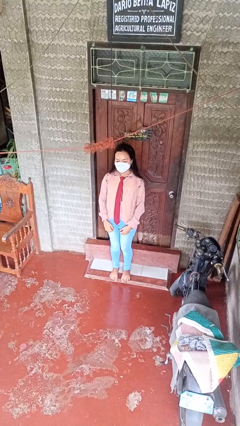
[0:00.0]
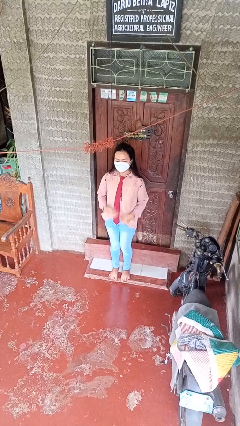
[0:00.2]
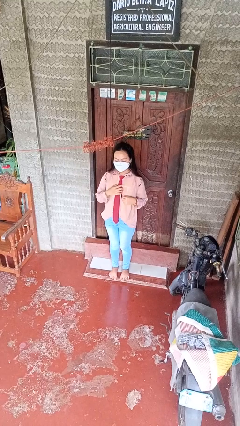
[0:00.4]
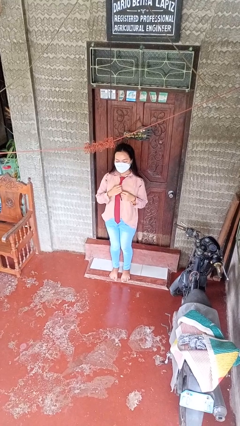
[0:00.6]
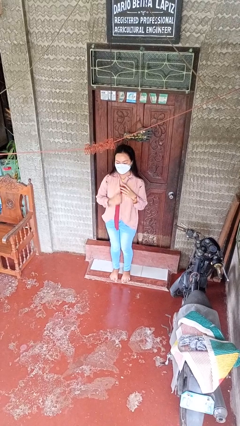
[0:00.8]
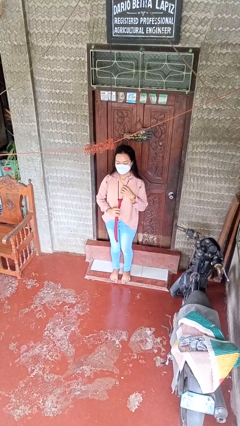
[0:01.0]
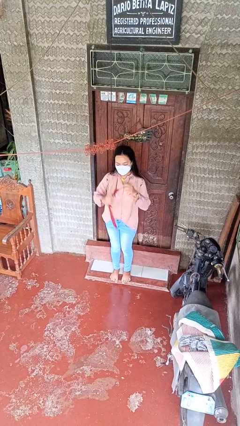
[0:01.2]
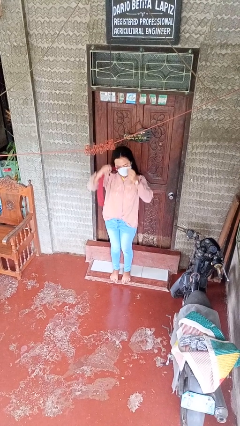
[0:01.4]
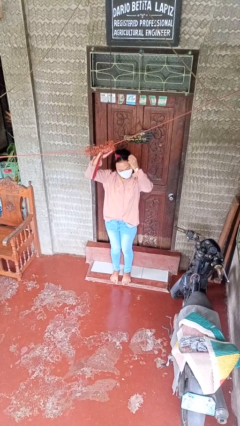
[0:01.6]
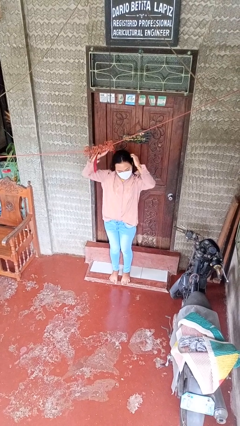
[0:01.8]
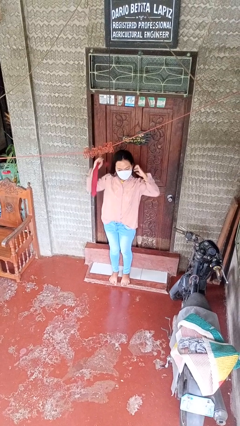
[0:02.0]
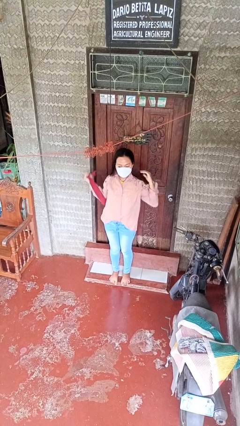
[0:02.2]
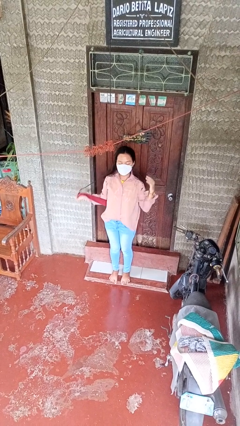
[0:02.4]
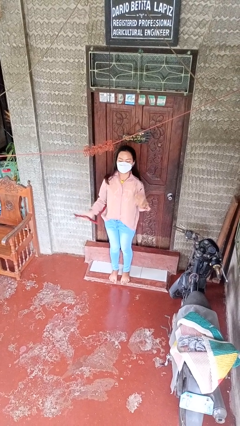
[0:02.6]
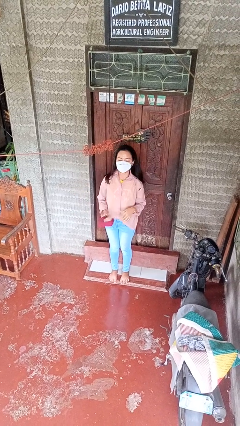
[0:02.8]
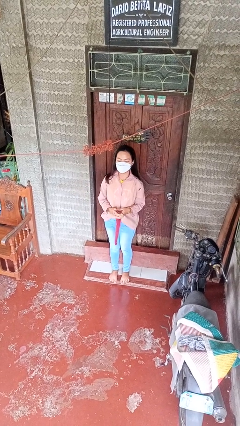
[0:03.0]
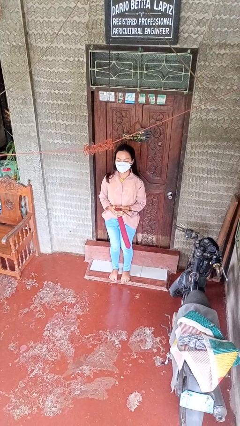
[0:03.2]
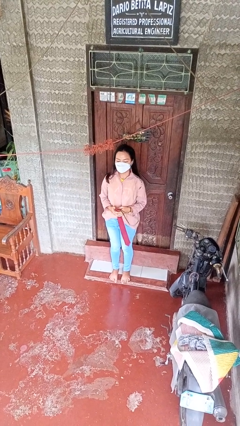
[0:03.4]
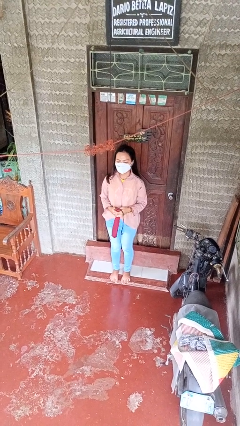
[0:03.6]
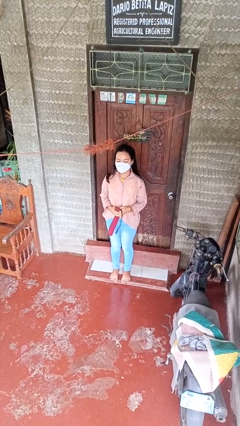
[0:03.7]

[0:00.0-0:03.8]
person takes off necktie

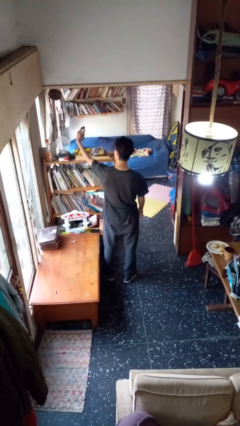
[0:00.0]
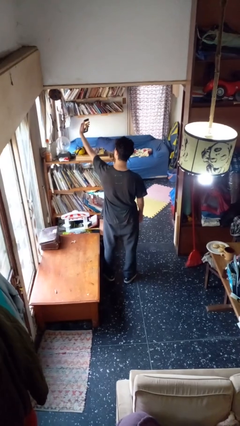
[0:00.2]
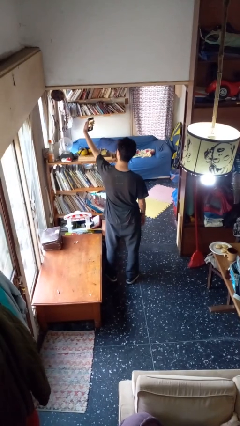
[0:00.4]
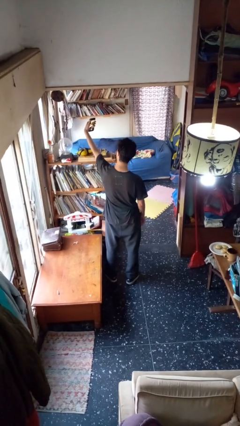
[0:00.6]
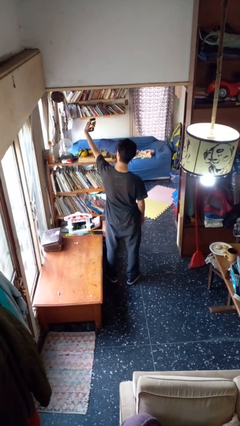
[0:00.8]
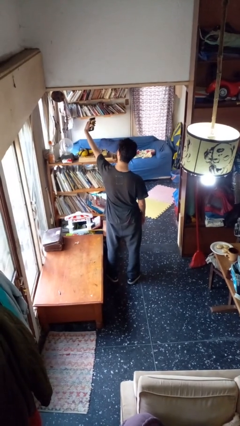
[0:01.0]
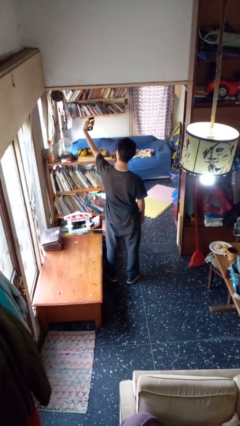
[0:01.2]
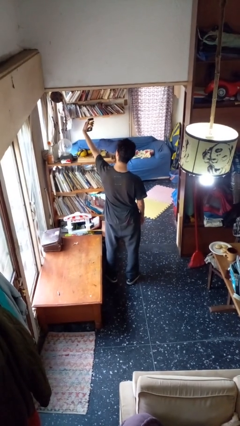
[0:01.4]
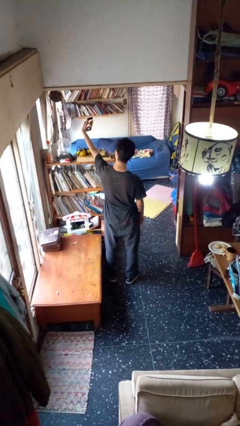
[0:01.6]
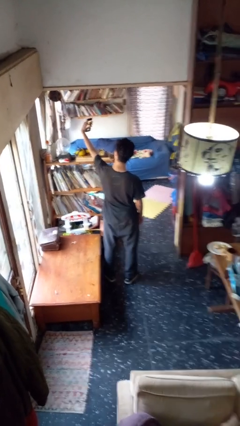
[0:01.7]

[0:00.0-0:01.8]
person takes selfie

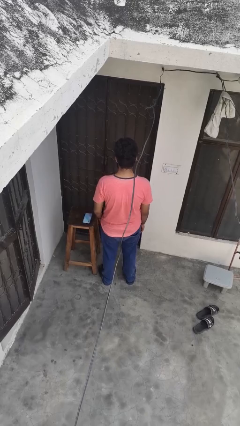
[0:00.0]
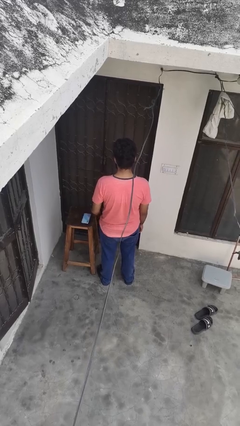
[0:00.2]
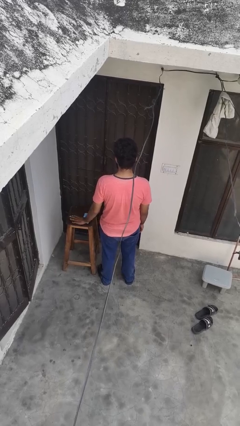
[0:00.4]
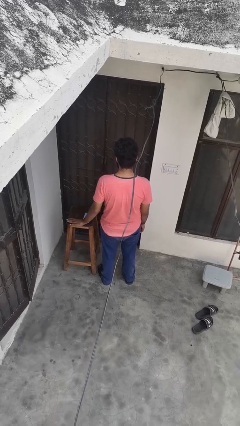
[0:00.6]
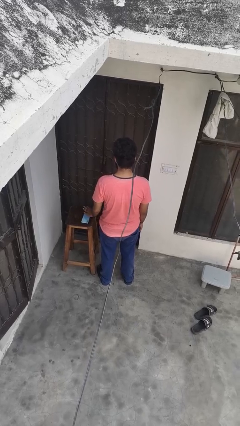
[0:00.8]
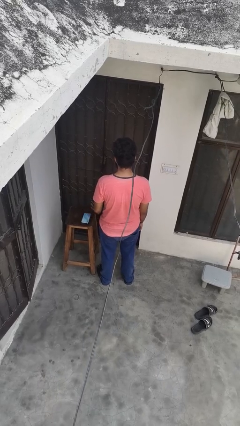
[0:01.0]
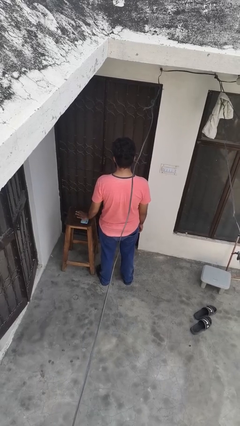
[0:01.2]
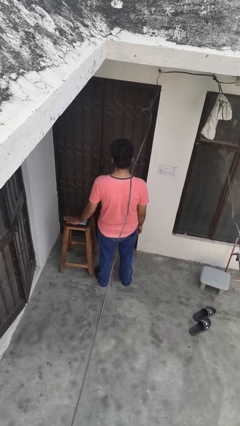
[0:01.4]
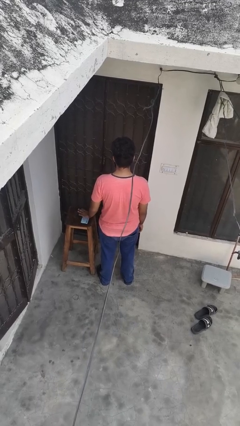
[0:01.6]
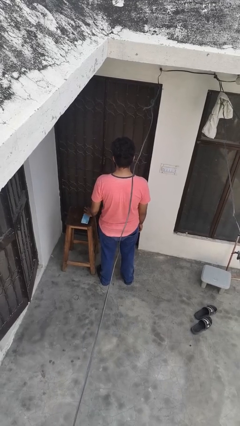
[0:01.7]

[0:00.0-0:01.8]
person waves hand over object

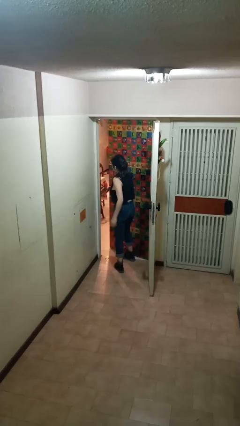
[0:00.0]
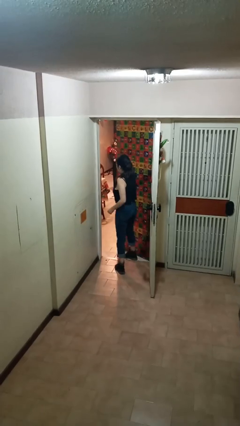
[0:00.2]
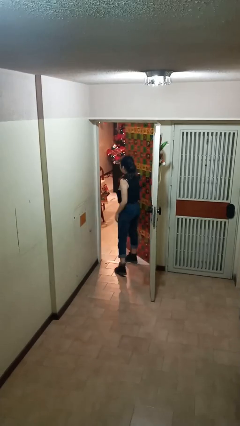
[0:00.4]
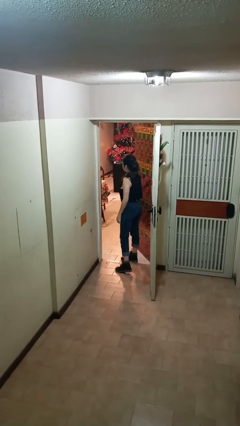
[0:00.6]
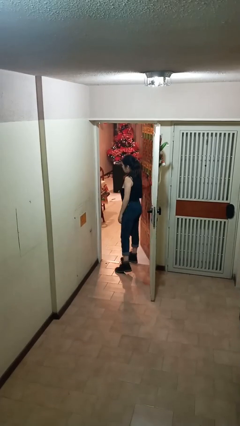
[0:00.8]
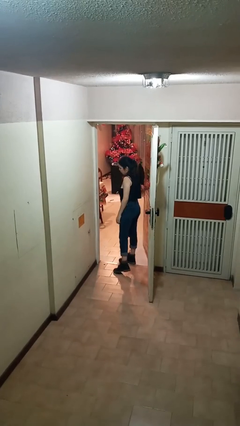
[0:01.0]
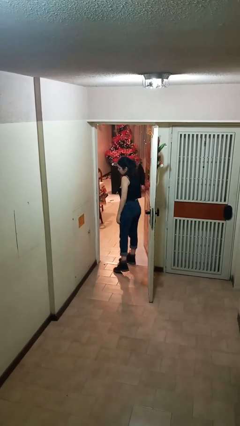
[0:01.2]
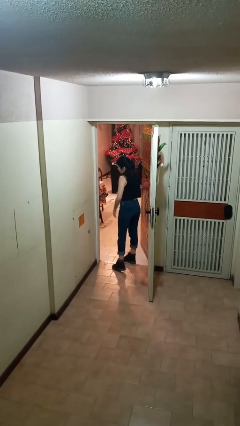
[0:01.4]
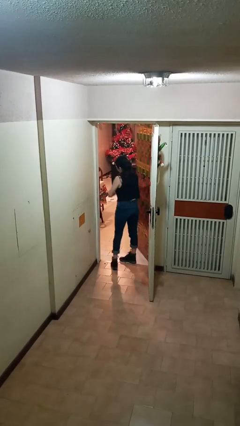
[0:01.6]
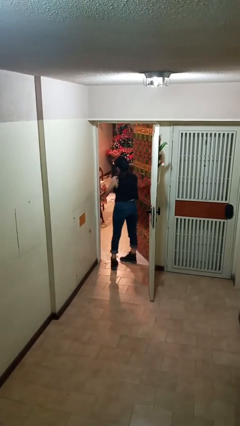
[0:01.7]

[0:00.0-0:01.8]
person opens facility door

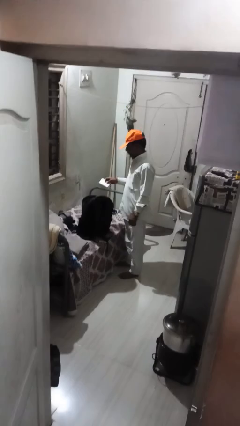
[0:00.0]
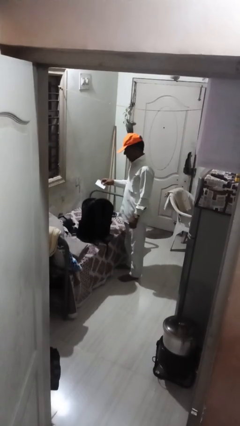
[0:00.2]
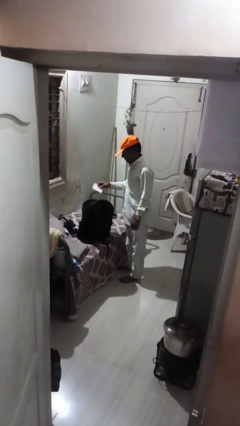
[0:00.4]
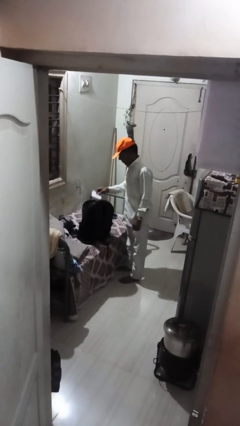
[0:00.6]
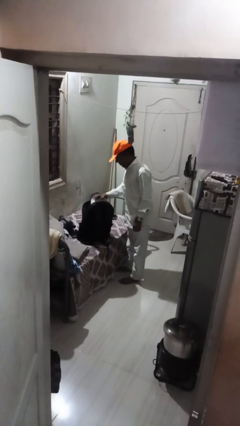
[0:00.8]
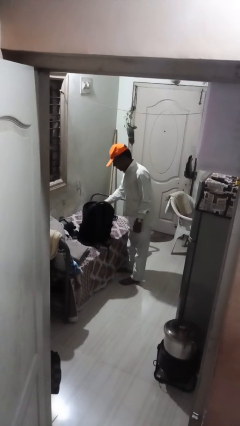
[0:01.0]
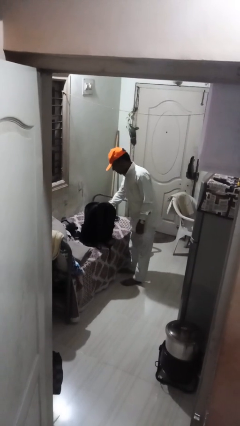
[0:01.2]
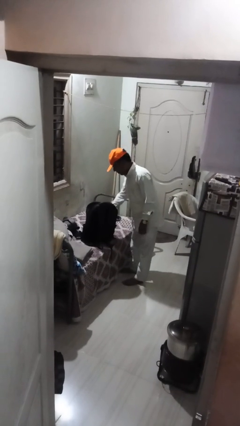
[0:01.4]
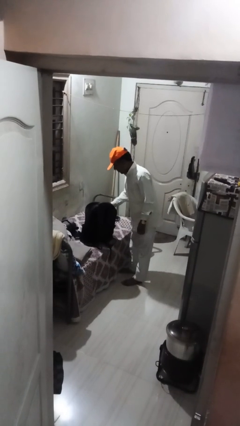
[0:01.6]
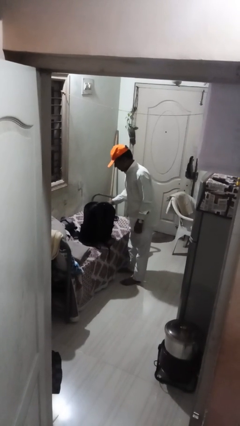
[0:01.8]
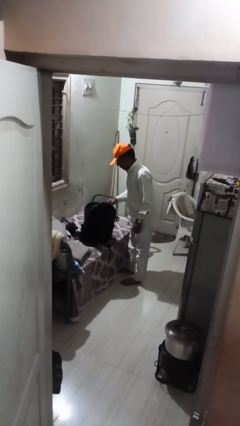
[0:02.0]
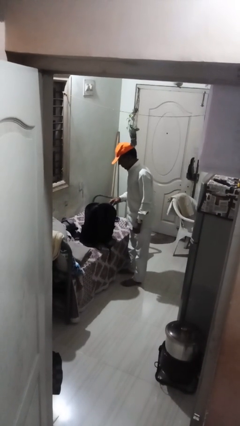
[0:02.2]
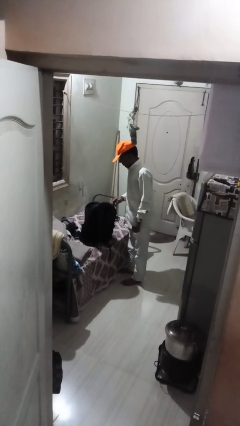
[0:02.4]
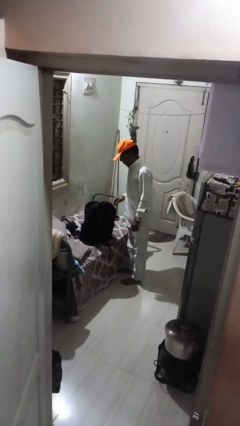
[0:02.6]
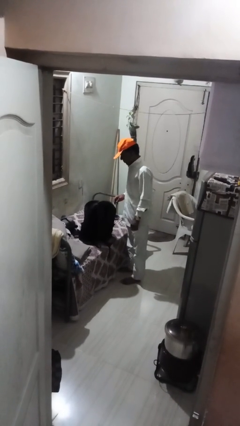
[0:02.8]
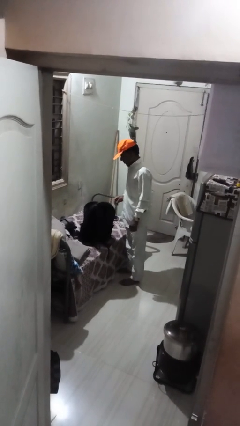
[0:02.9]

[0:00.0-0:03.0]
person puts object into backpack

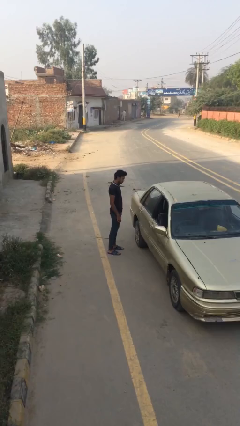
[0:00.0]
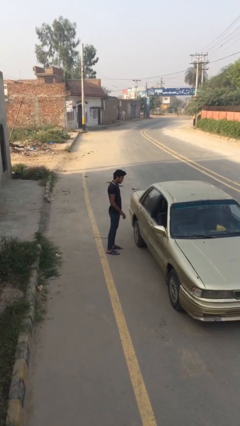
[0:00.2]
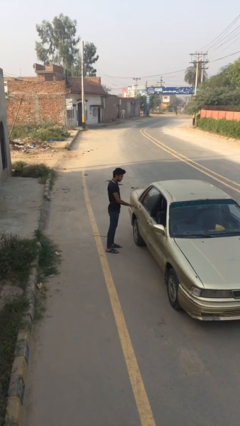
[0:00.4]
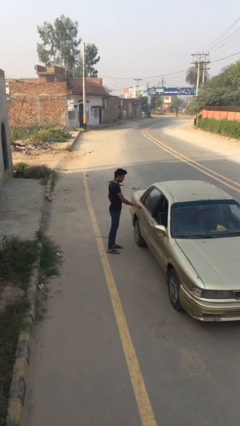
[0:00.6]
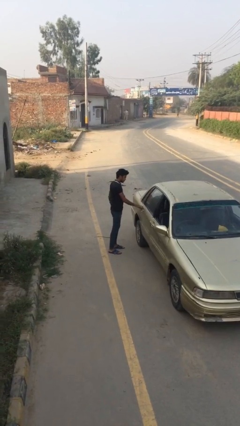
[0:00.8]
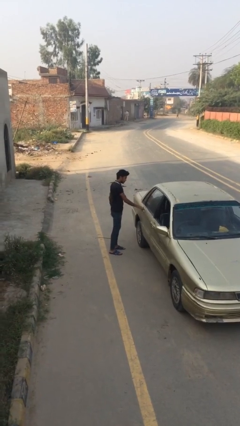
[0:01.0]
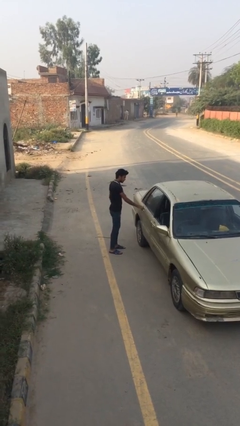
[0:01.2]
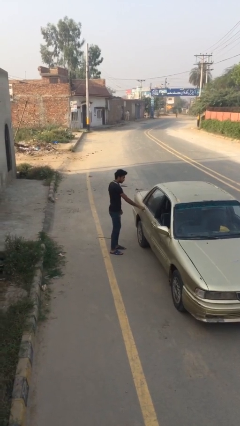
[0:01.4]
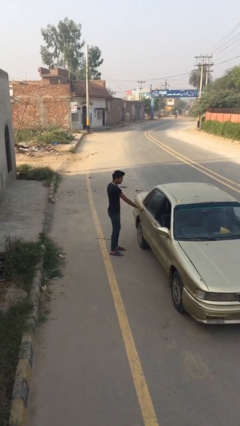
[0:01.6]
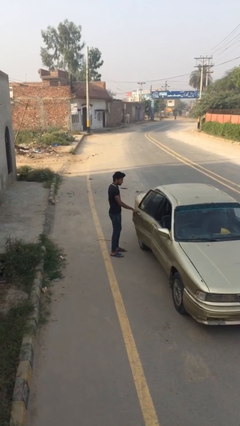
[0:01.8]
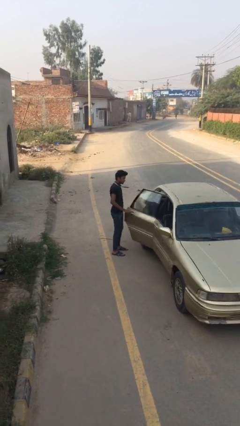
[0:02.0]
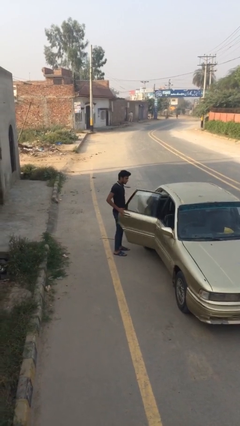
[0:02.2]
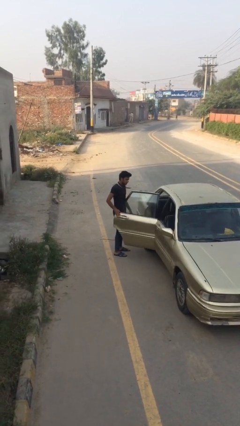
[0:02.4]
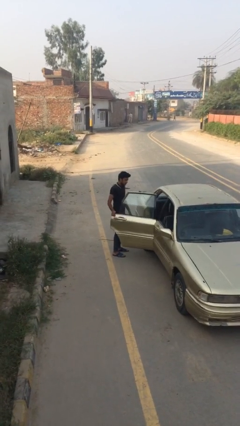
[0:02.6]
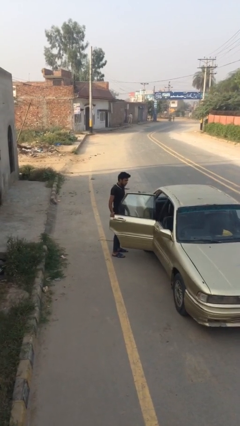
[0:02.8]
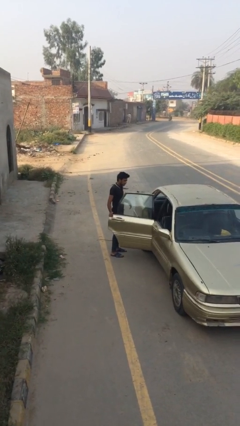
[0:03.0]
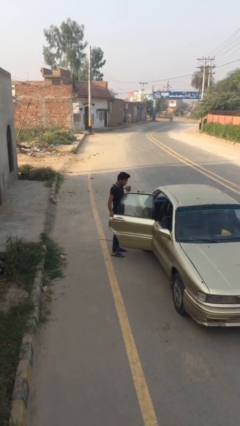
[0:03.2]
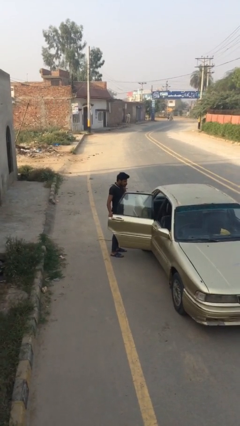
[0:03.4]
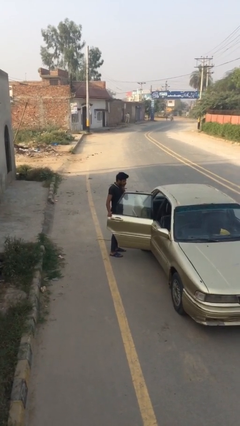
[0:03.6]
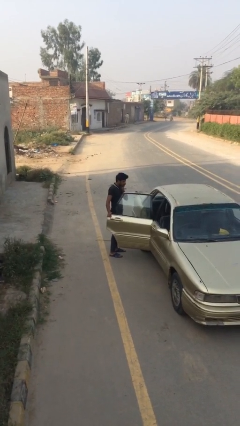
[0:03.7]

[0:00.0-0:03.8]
person opens car door

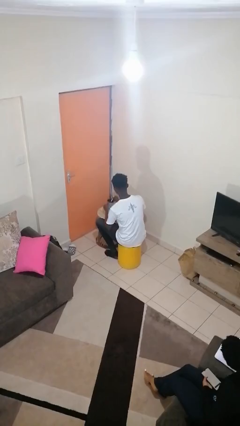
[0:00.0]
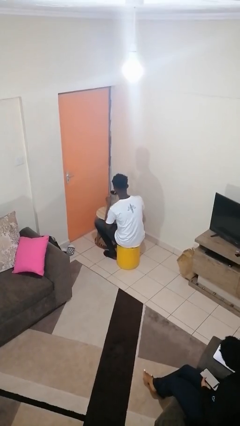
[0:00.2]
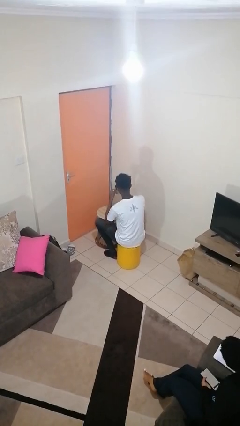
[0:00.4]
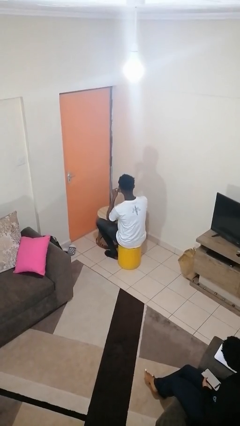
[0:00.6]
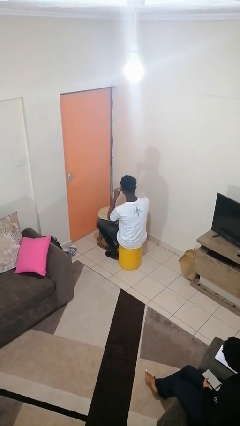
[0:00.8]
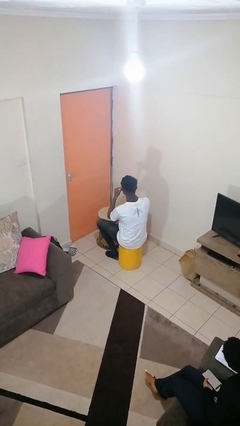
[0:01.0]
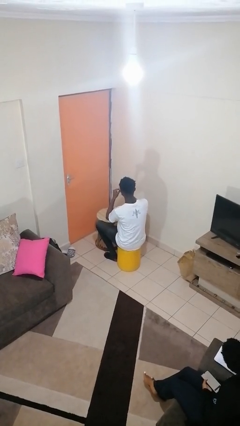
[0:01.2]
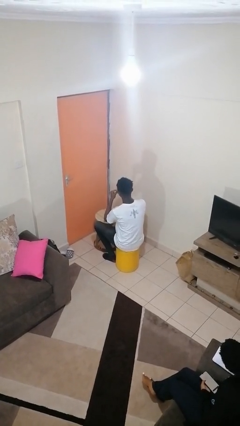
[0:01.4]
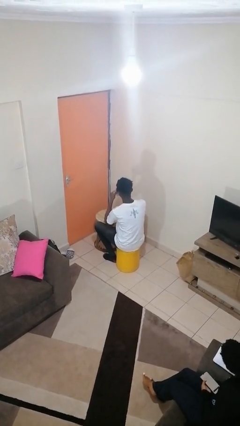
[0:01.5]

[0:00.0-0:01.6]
person drinks from mug
